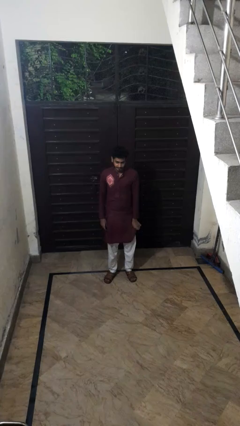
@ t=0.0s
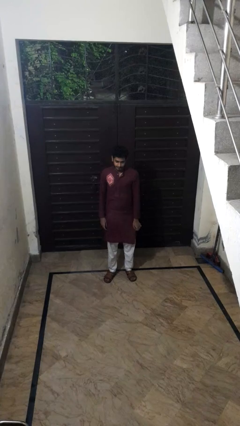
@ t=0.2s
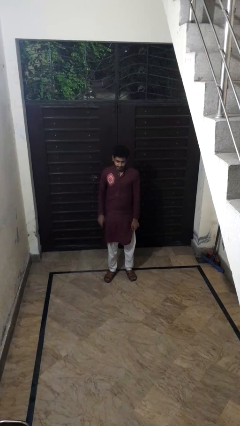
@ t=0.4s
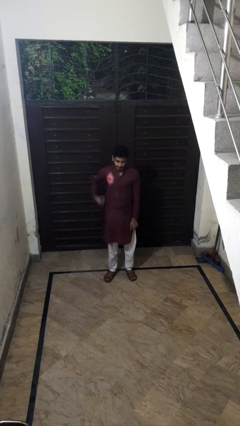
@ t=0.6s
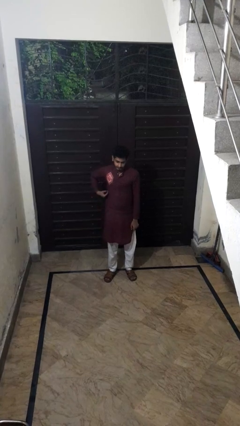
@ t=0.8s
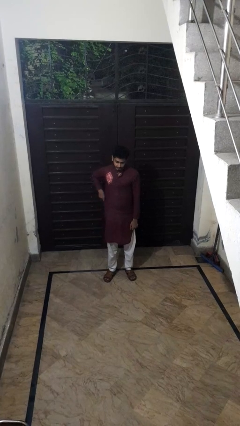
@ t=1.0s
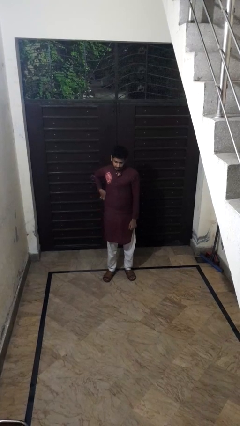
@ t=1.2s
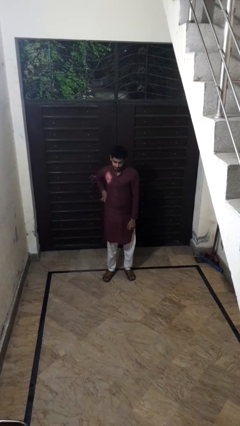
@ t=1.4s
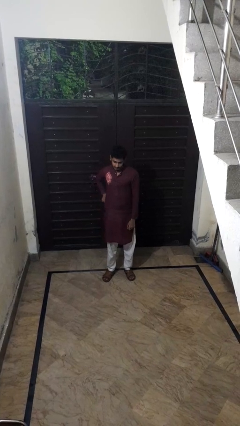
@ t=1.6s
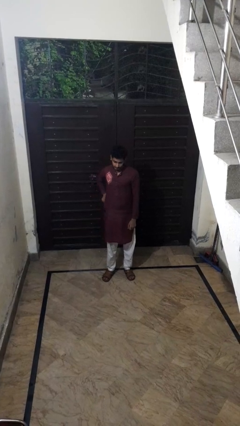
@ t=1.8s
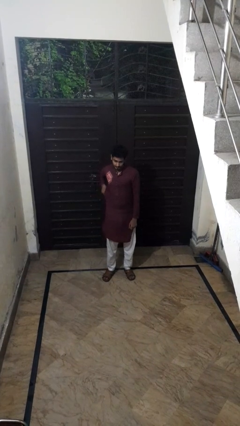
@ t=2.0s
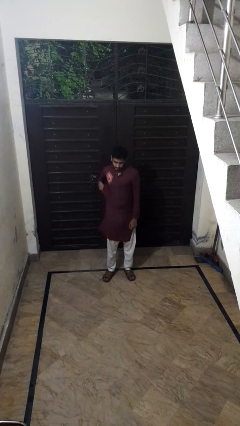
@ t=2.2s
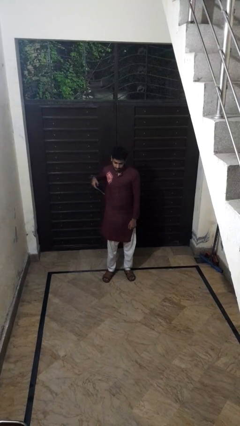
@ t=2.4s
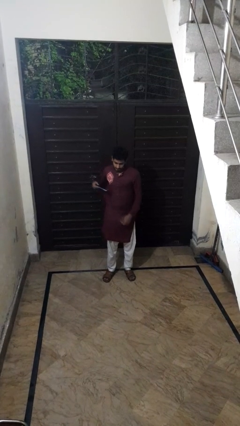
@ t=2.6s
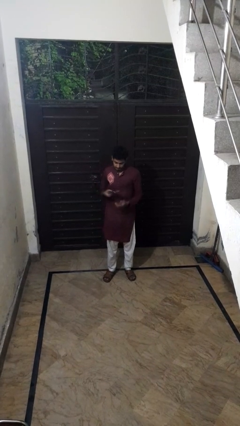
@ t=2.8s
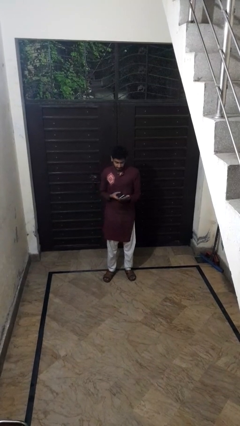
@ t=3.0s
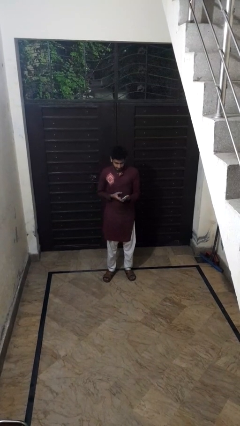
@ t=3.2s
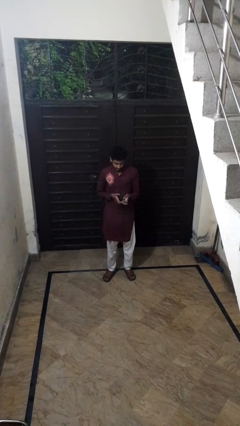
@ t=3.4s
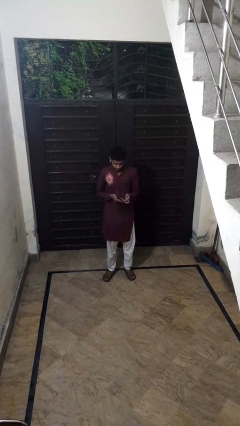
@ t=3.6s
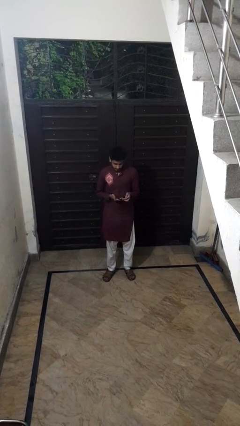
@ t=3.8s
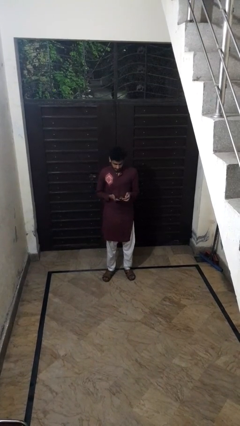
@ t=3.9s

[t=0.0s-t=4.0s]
person takes phone from pocket

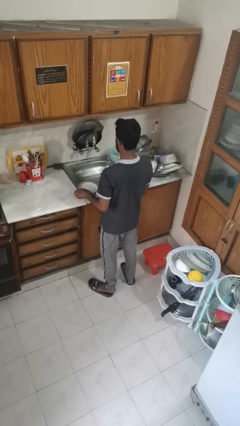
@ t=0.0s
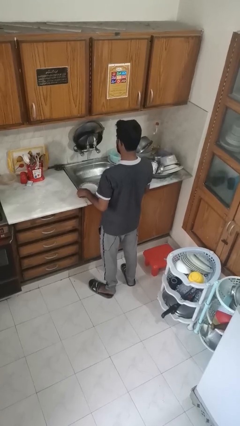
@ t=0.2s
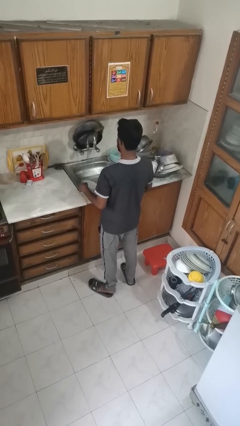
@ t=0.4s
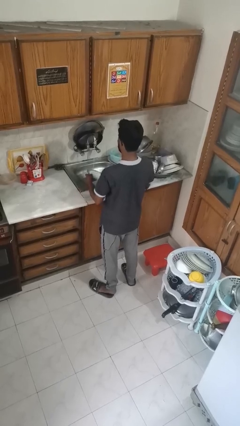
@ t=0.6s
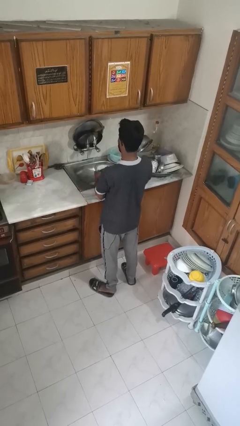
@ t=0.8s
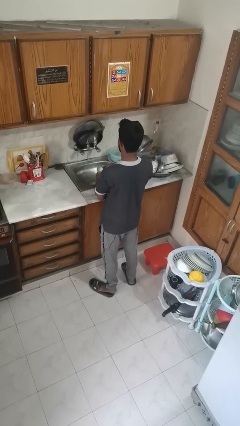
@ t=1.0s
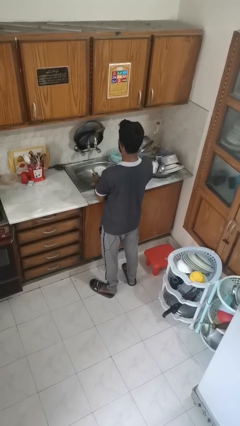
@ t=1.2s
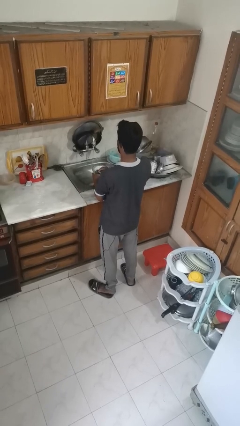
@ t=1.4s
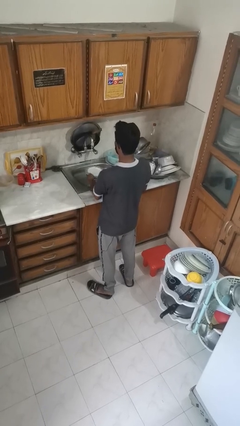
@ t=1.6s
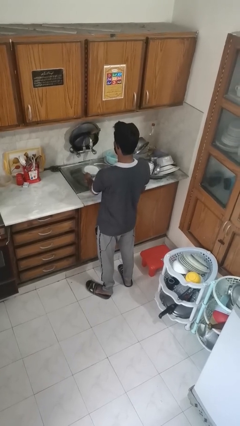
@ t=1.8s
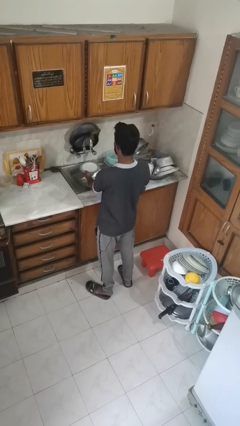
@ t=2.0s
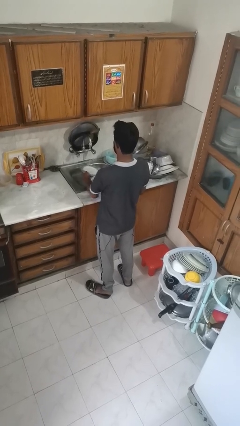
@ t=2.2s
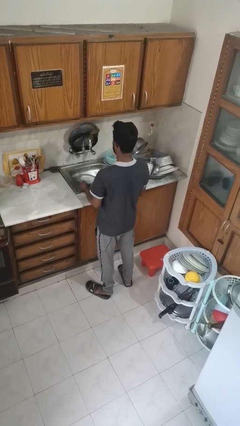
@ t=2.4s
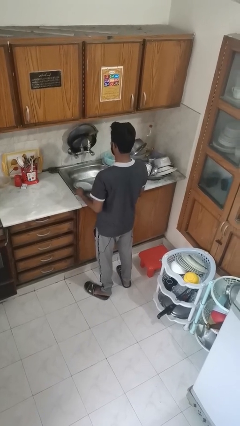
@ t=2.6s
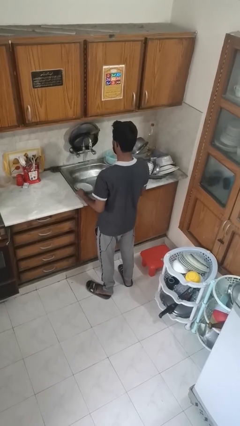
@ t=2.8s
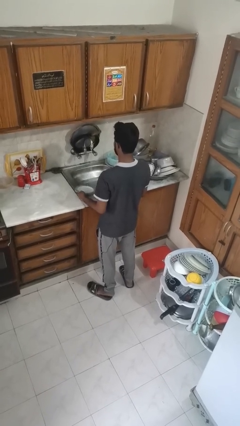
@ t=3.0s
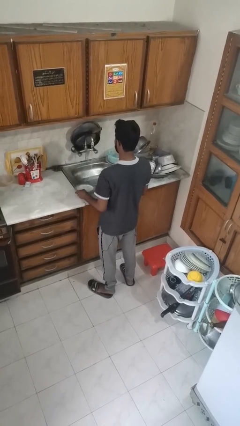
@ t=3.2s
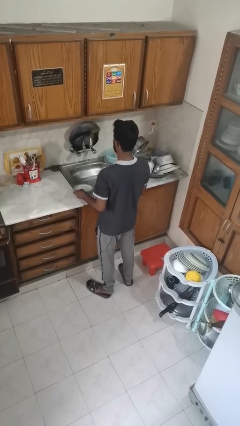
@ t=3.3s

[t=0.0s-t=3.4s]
person washes dish

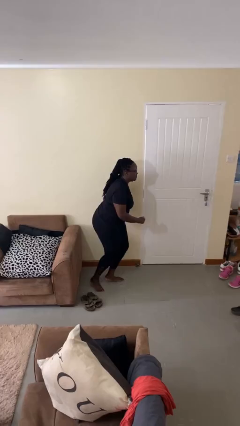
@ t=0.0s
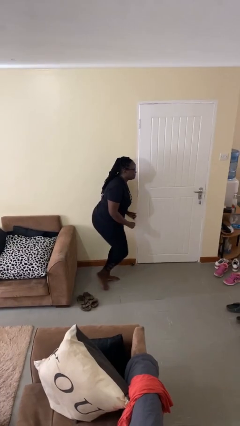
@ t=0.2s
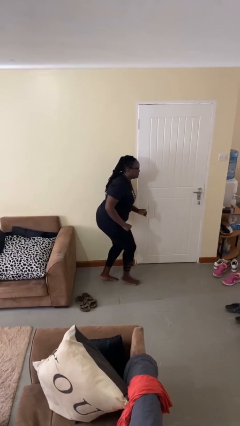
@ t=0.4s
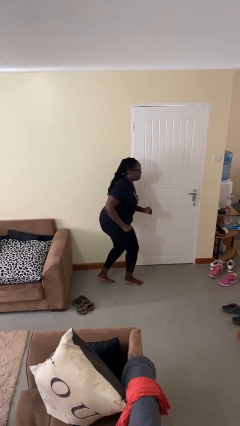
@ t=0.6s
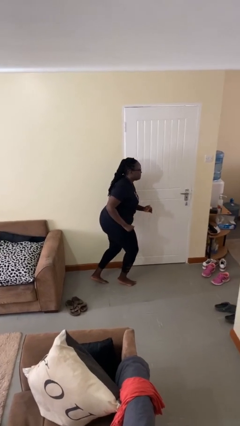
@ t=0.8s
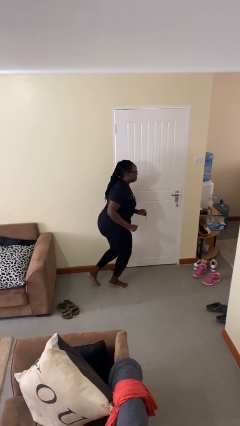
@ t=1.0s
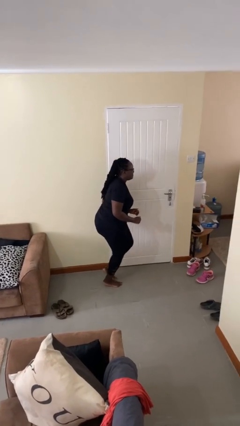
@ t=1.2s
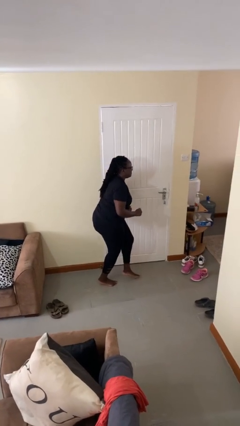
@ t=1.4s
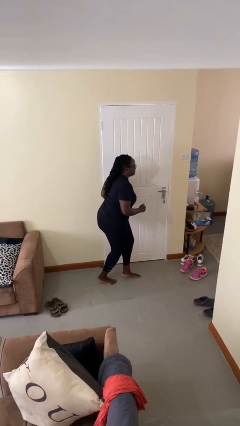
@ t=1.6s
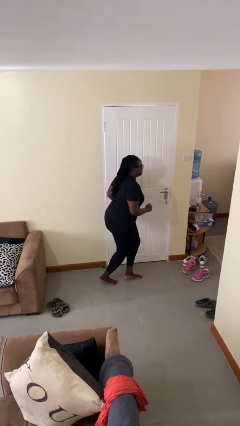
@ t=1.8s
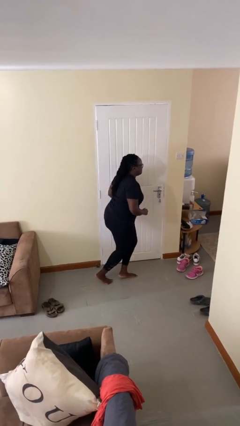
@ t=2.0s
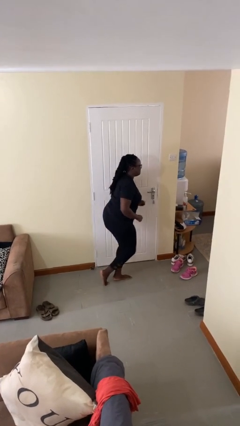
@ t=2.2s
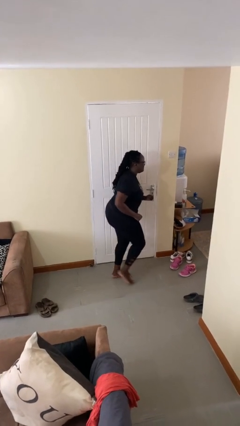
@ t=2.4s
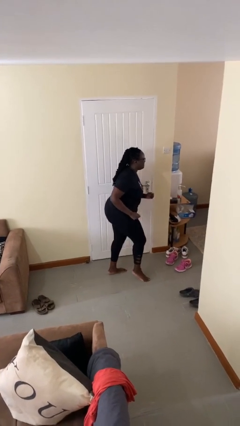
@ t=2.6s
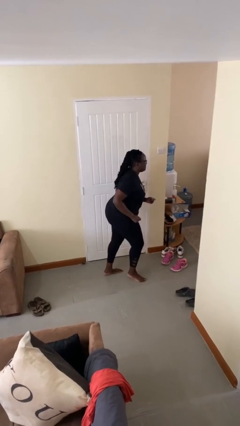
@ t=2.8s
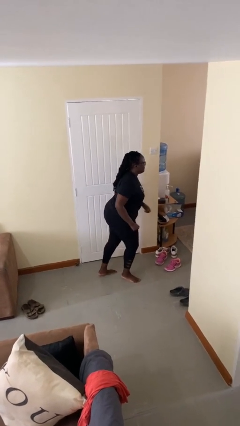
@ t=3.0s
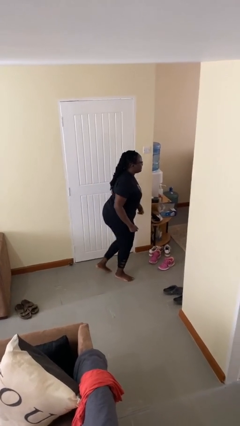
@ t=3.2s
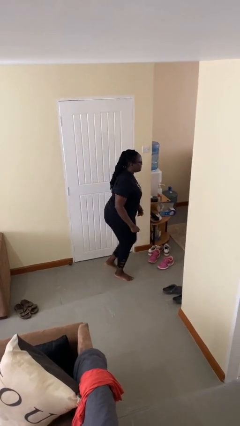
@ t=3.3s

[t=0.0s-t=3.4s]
person walks tiptoe

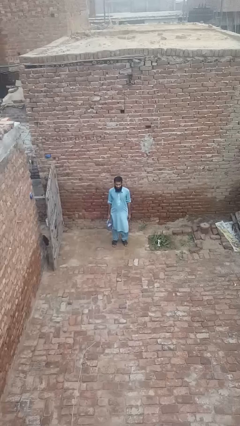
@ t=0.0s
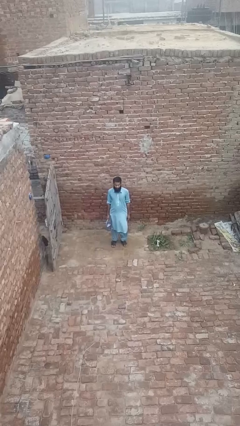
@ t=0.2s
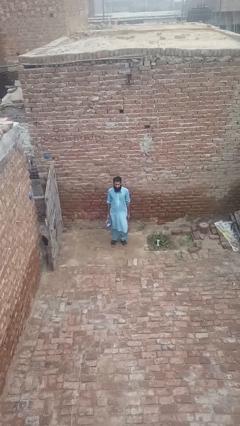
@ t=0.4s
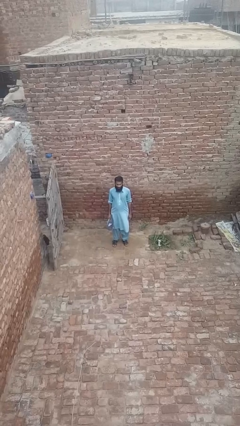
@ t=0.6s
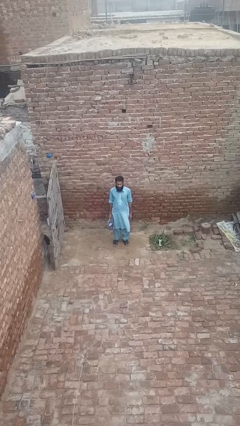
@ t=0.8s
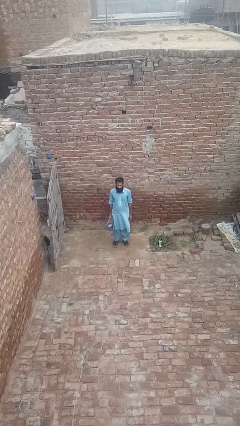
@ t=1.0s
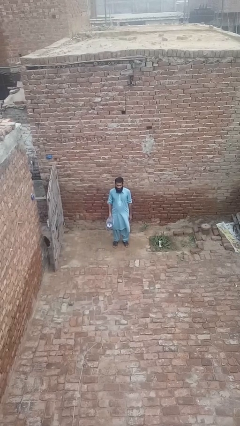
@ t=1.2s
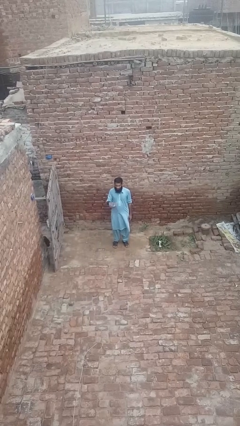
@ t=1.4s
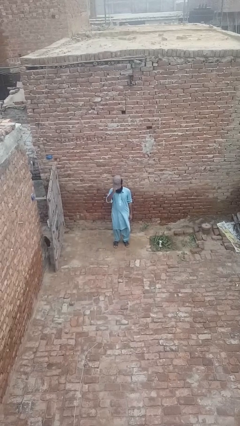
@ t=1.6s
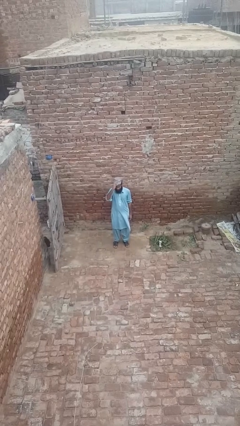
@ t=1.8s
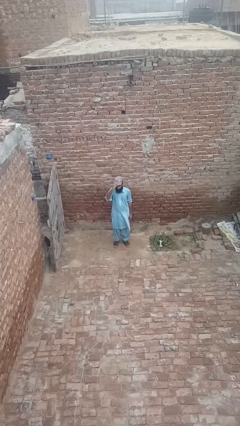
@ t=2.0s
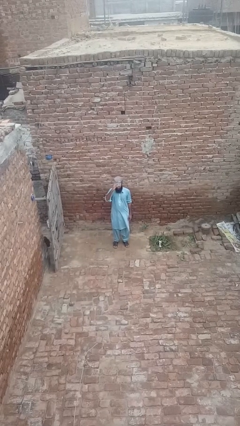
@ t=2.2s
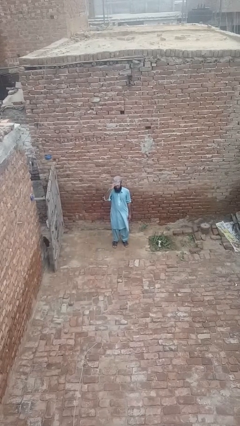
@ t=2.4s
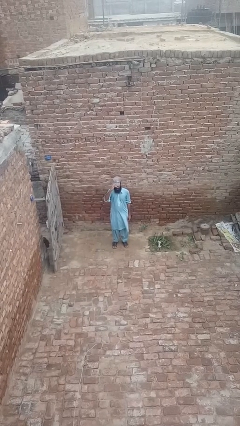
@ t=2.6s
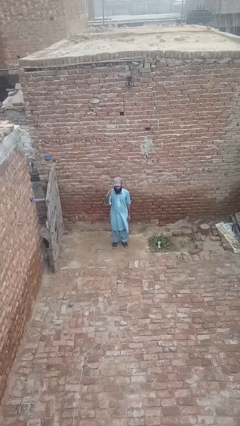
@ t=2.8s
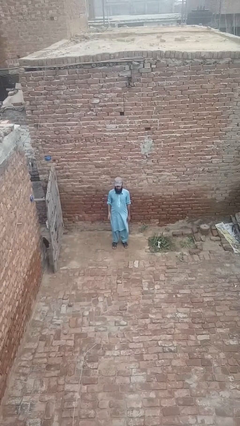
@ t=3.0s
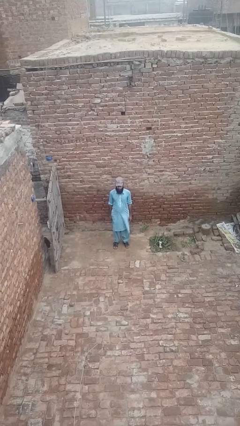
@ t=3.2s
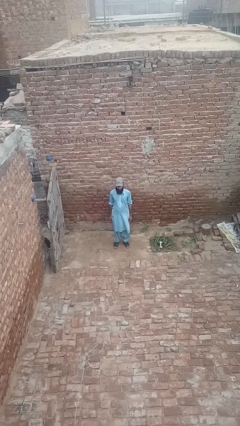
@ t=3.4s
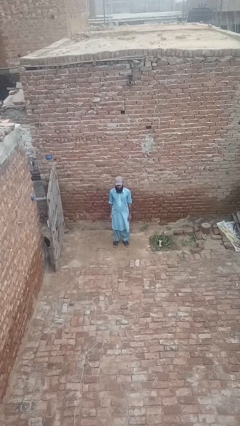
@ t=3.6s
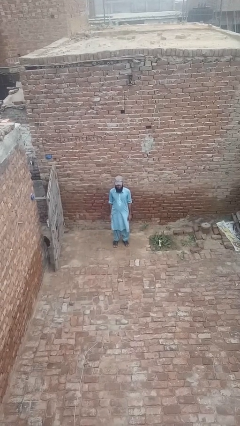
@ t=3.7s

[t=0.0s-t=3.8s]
person puts on hat

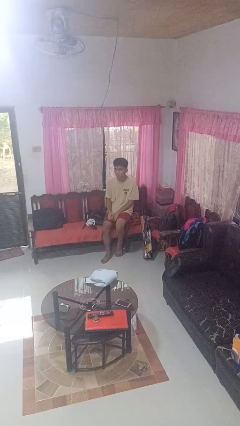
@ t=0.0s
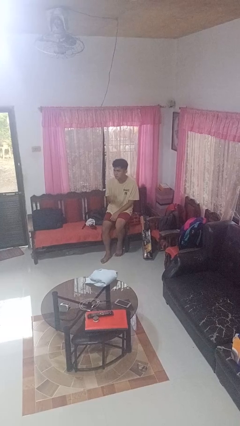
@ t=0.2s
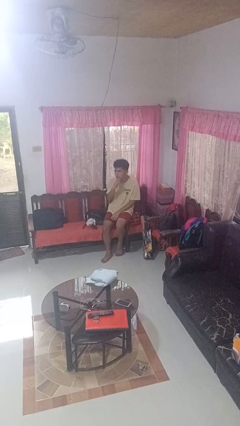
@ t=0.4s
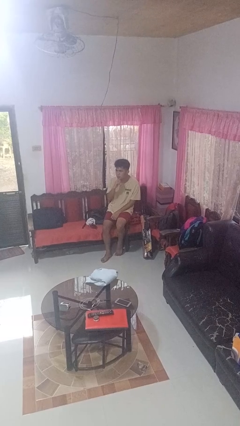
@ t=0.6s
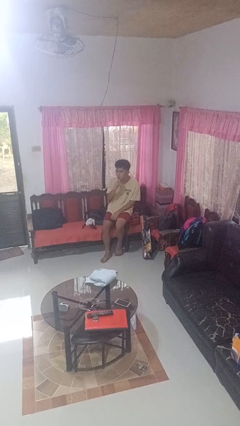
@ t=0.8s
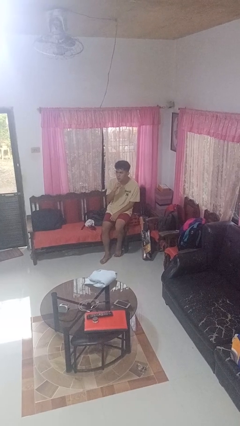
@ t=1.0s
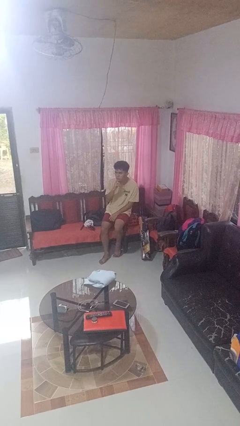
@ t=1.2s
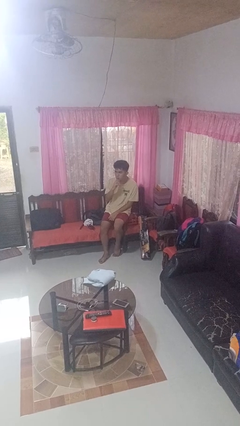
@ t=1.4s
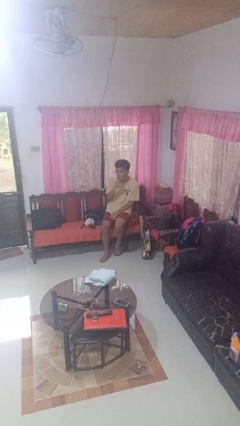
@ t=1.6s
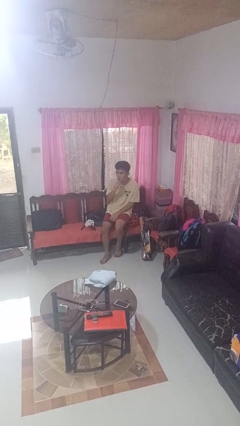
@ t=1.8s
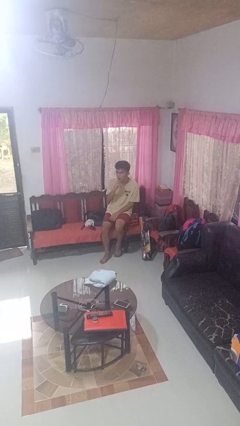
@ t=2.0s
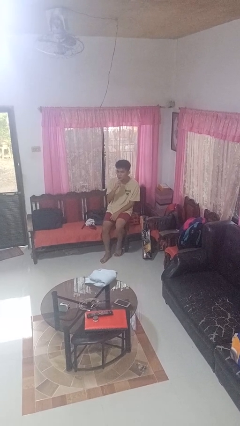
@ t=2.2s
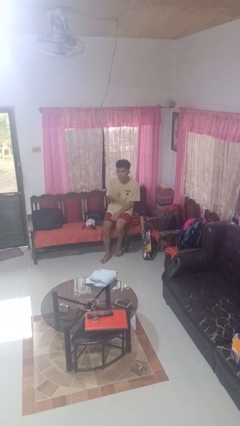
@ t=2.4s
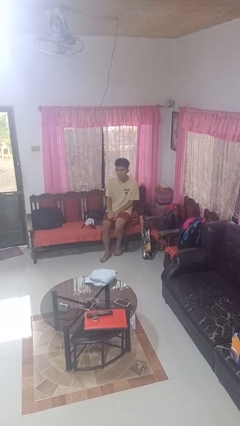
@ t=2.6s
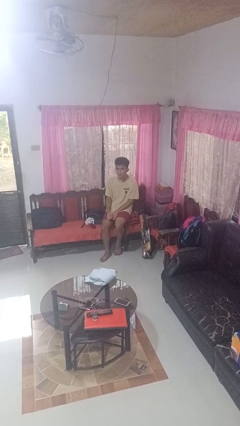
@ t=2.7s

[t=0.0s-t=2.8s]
person strokes chin

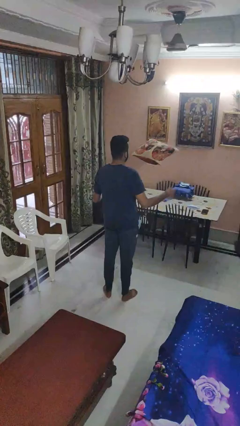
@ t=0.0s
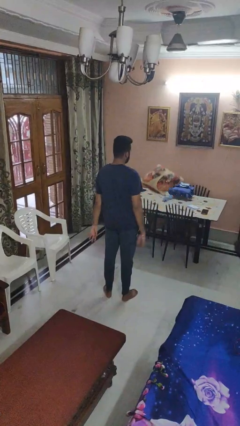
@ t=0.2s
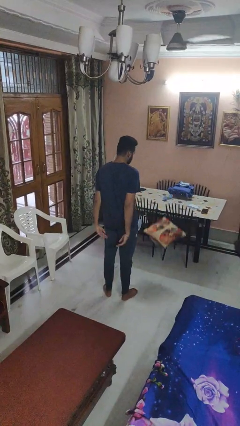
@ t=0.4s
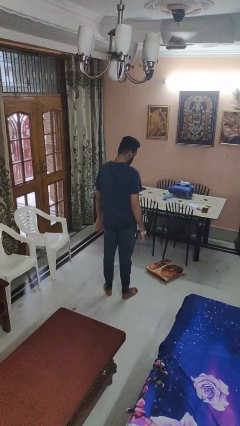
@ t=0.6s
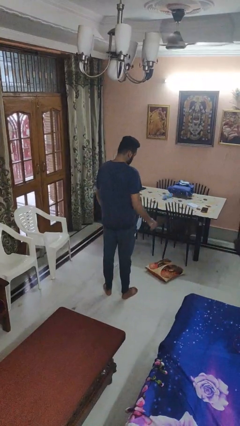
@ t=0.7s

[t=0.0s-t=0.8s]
person throws object into air
